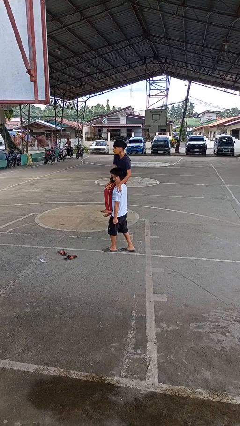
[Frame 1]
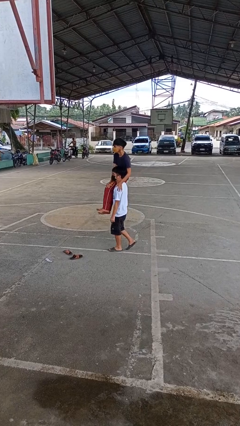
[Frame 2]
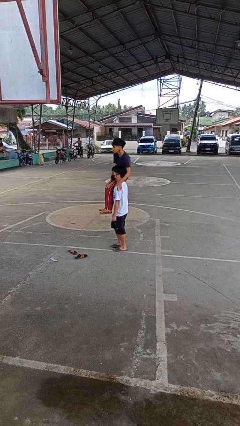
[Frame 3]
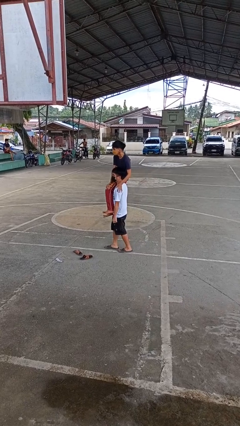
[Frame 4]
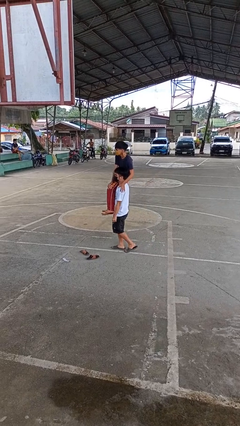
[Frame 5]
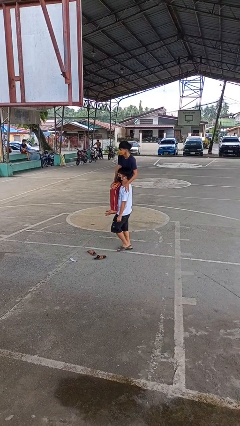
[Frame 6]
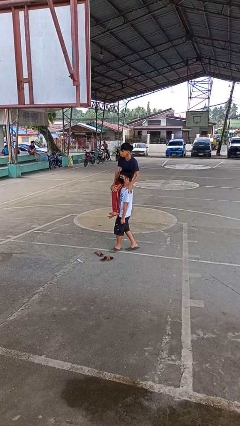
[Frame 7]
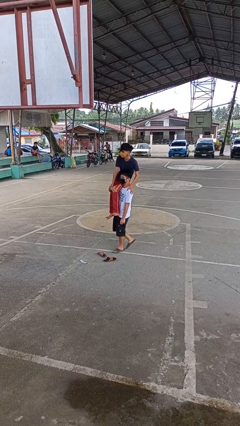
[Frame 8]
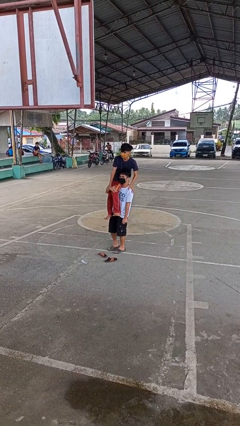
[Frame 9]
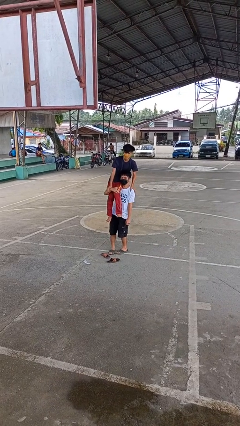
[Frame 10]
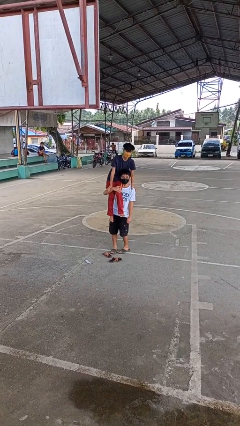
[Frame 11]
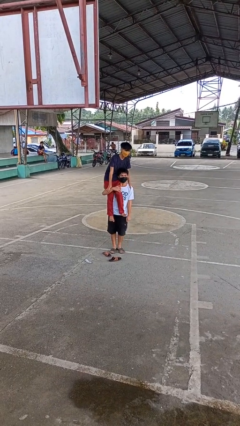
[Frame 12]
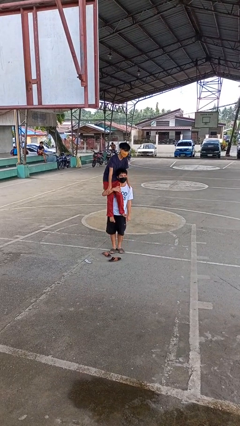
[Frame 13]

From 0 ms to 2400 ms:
person carries person on shoulders

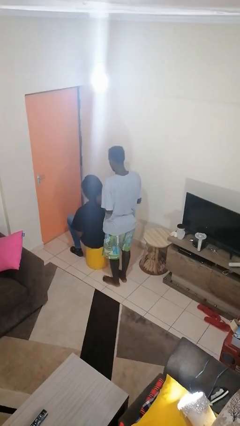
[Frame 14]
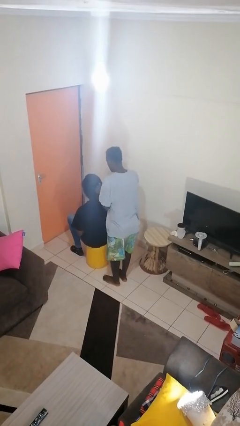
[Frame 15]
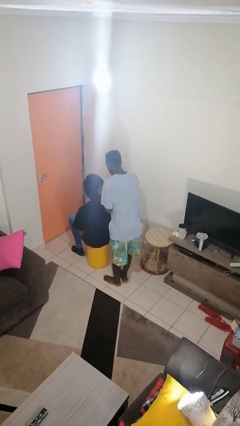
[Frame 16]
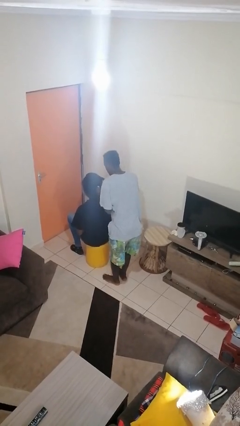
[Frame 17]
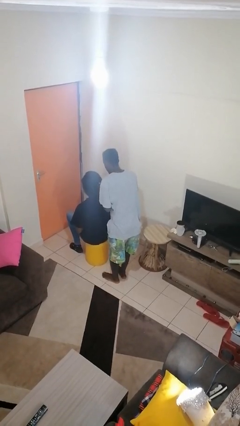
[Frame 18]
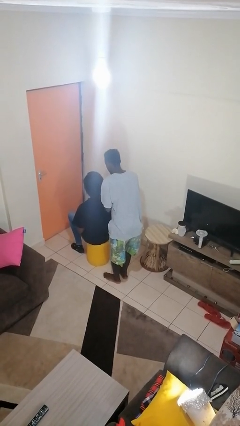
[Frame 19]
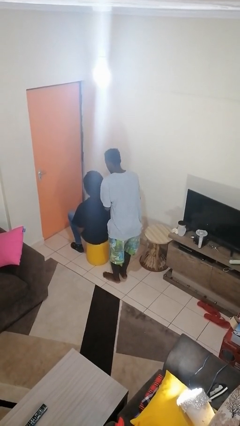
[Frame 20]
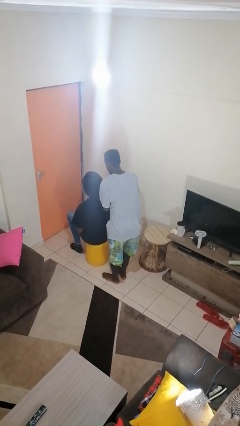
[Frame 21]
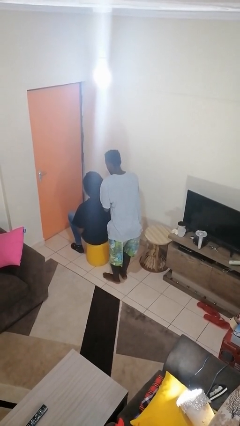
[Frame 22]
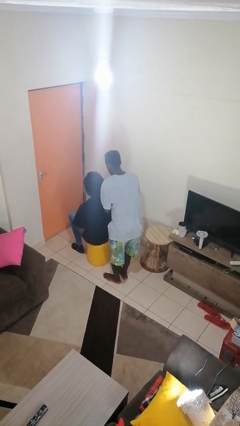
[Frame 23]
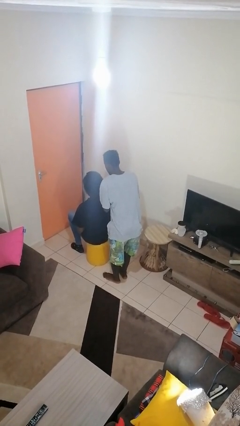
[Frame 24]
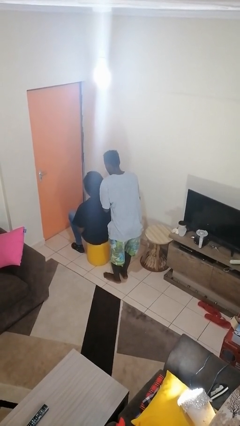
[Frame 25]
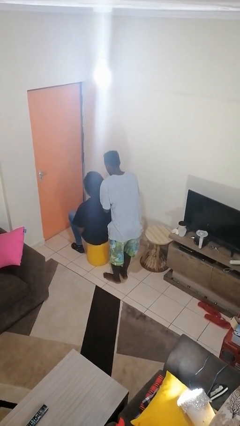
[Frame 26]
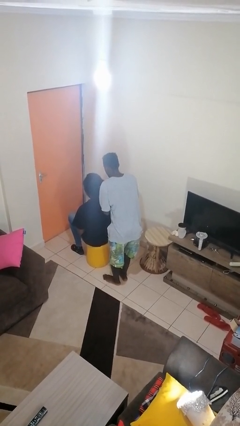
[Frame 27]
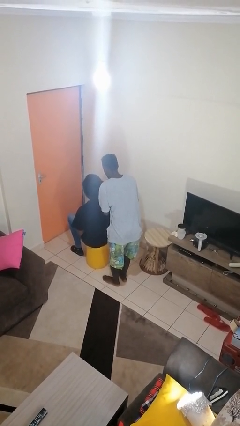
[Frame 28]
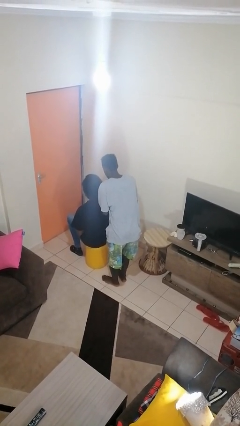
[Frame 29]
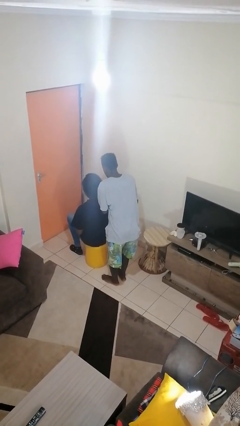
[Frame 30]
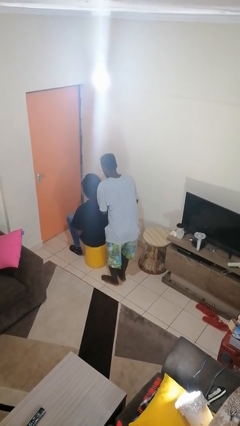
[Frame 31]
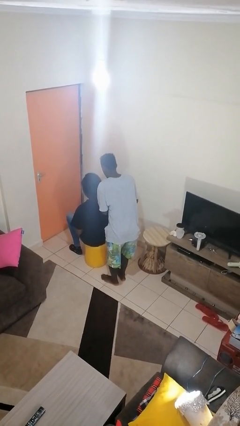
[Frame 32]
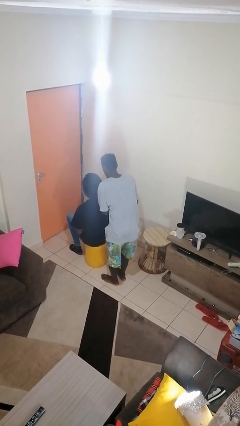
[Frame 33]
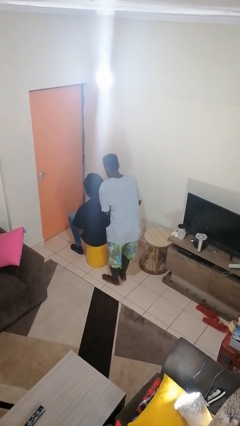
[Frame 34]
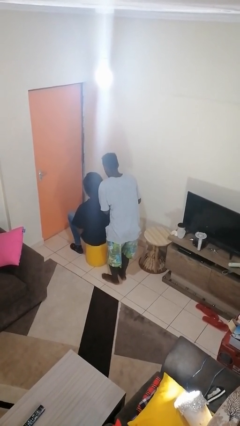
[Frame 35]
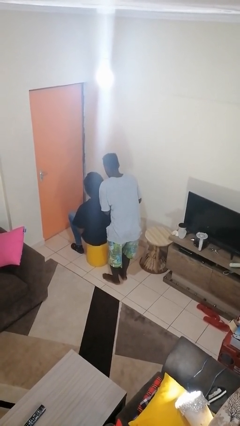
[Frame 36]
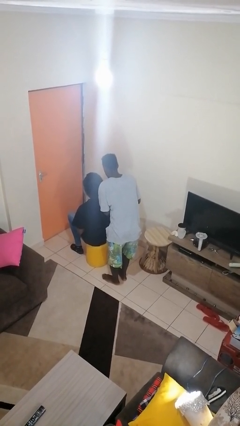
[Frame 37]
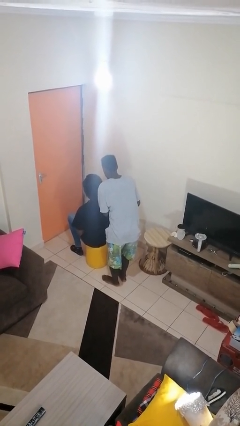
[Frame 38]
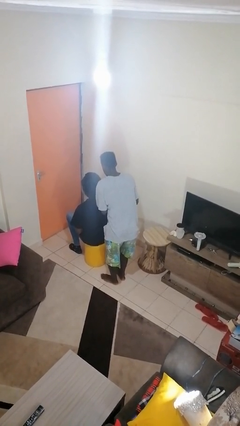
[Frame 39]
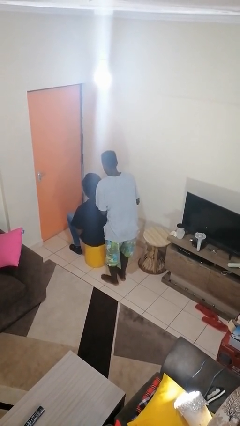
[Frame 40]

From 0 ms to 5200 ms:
person braids hair of person

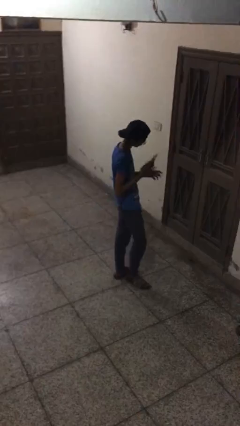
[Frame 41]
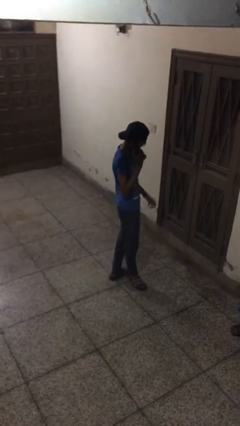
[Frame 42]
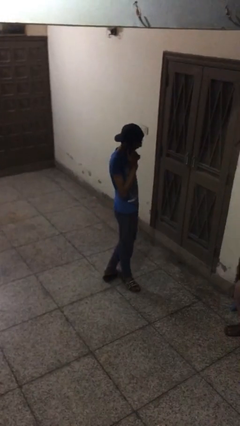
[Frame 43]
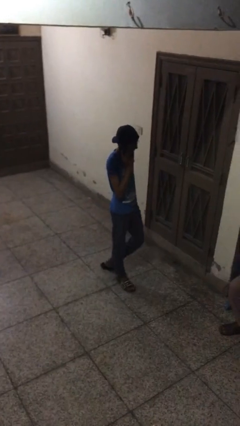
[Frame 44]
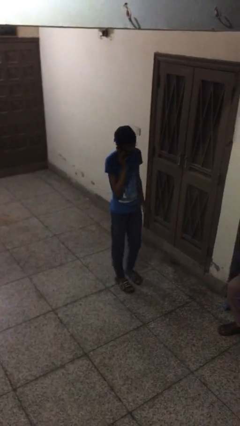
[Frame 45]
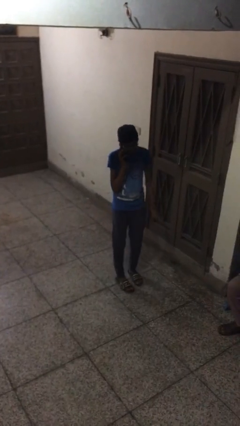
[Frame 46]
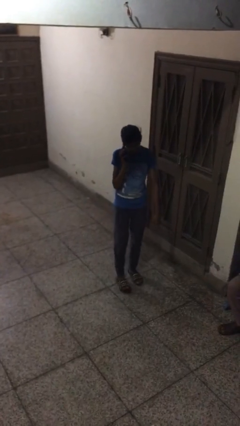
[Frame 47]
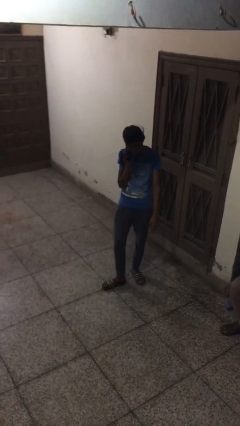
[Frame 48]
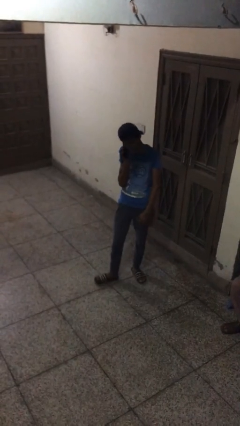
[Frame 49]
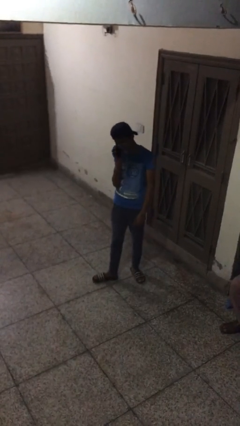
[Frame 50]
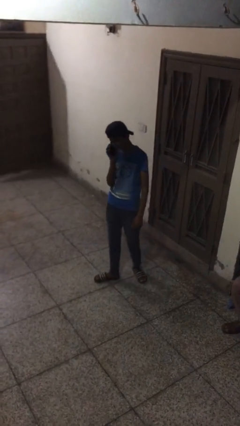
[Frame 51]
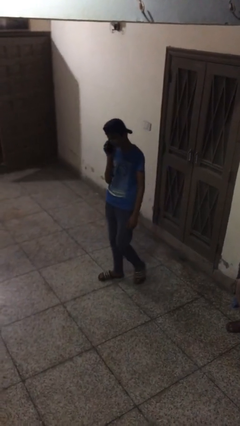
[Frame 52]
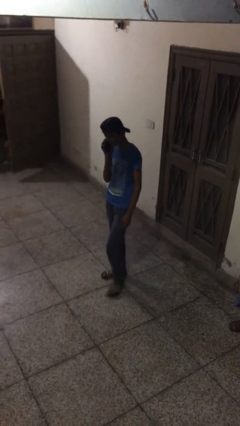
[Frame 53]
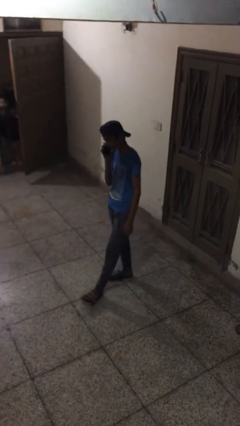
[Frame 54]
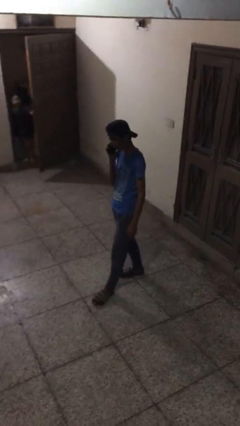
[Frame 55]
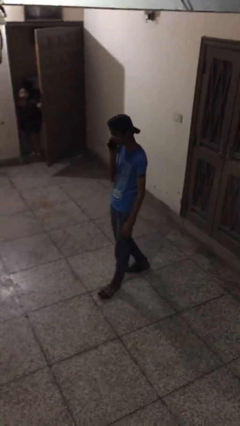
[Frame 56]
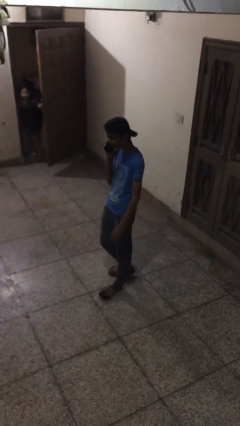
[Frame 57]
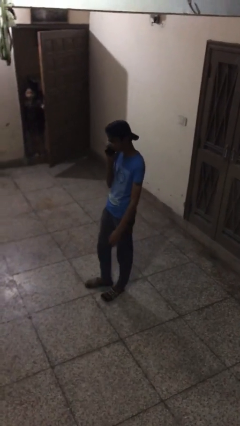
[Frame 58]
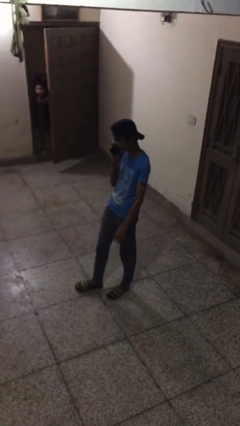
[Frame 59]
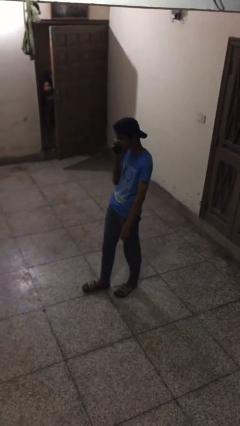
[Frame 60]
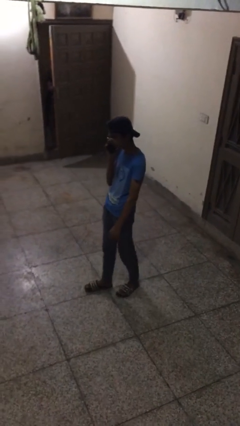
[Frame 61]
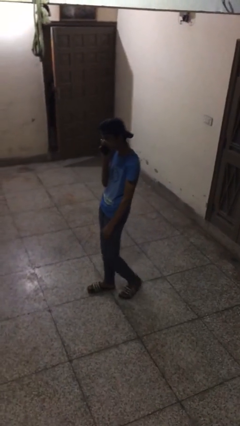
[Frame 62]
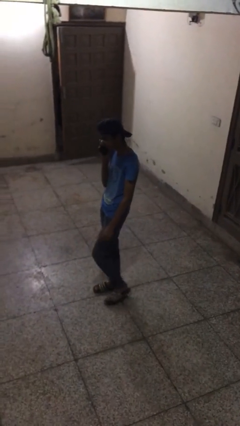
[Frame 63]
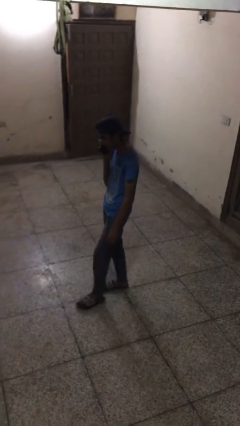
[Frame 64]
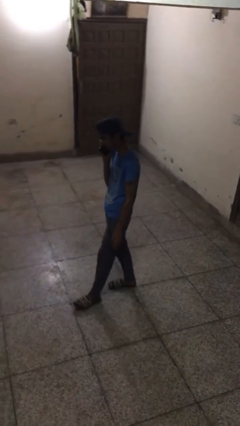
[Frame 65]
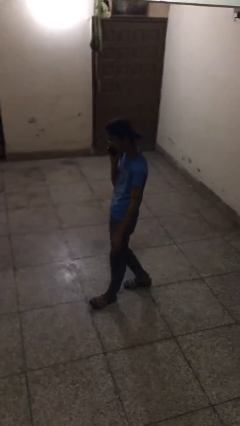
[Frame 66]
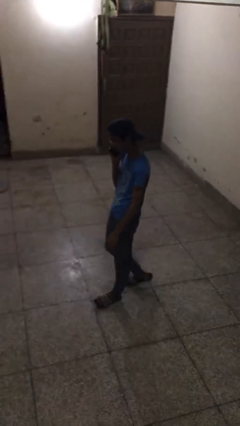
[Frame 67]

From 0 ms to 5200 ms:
person talks on phone

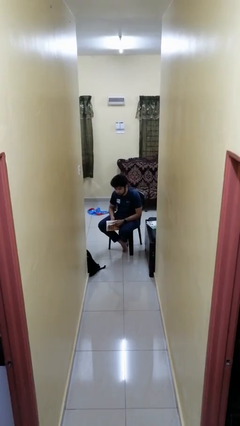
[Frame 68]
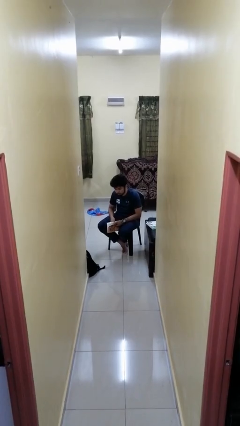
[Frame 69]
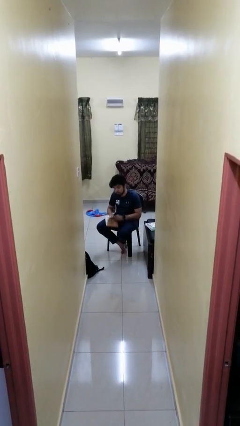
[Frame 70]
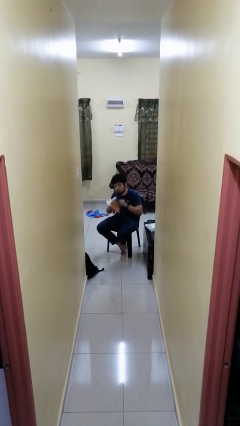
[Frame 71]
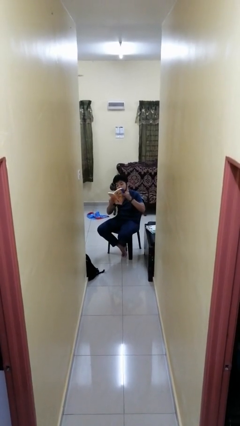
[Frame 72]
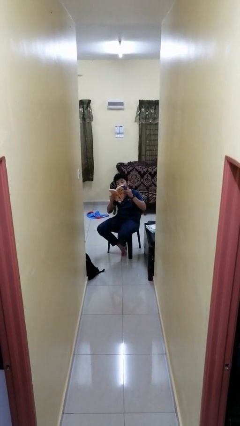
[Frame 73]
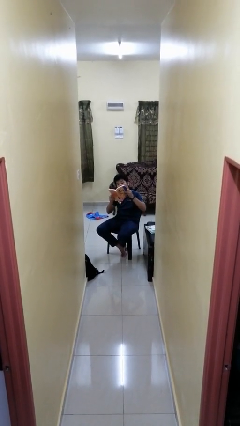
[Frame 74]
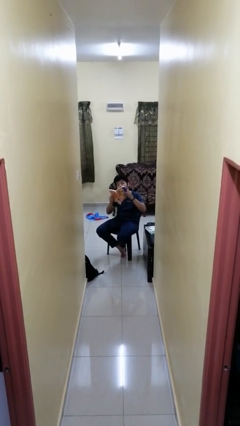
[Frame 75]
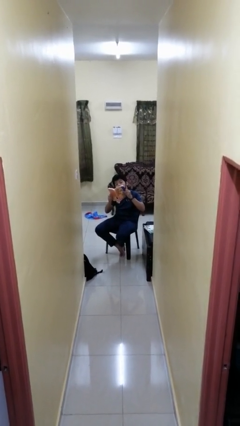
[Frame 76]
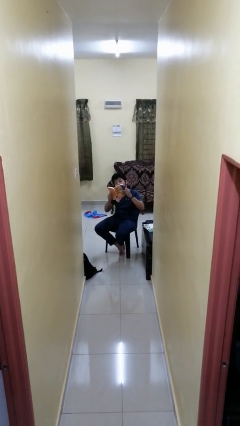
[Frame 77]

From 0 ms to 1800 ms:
person reads book

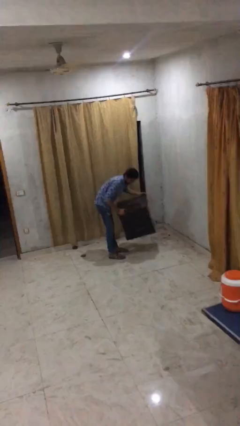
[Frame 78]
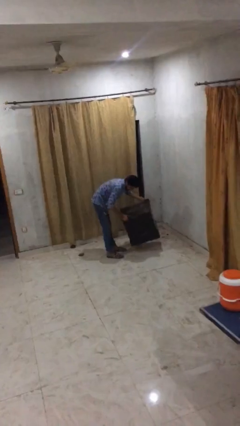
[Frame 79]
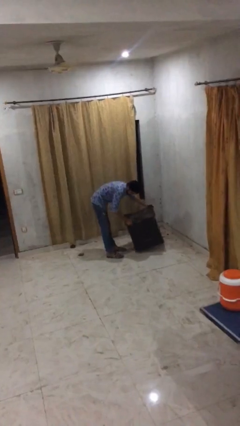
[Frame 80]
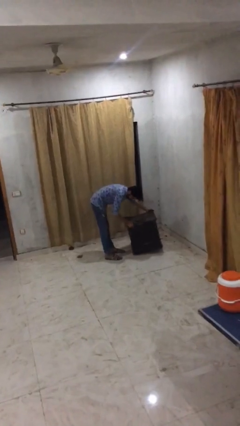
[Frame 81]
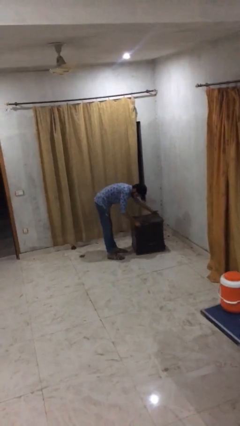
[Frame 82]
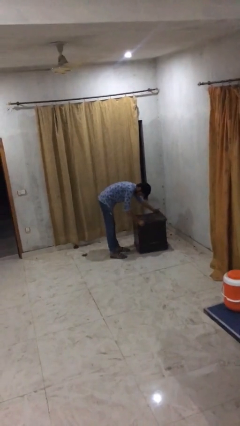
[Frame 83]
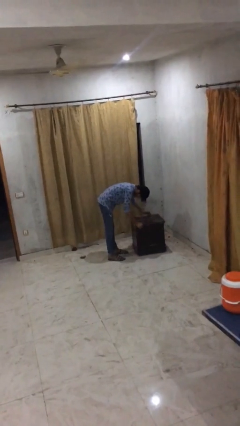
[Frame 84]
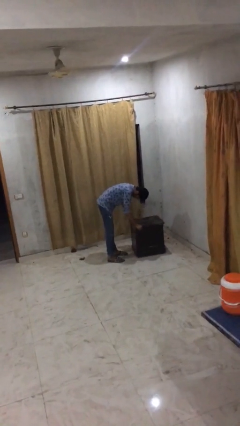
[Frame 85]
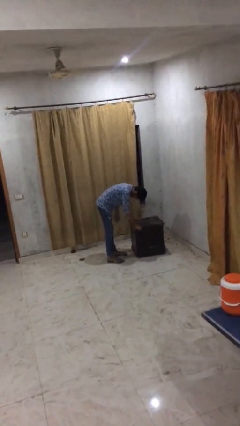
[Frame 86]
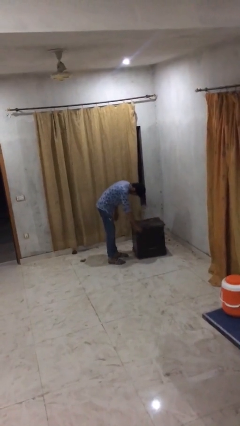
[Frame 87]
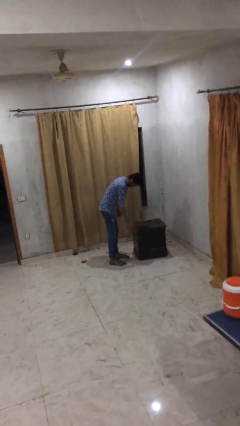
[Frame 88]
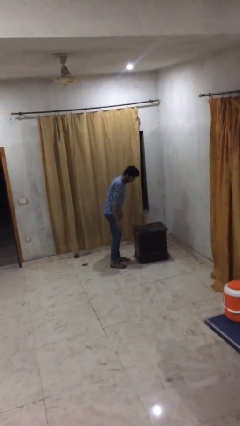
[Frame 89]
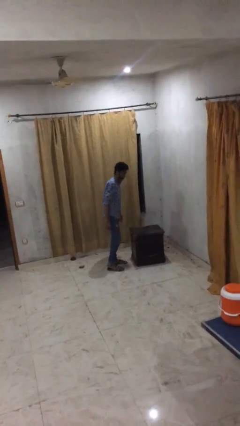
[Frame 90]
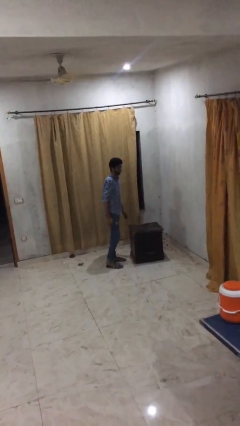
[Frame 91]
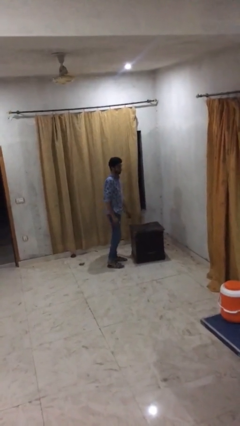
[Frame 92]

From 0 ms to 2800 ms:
person puts down object on floor
